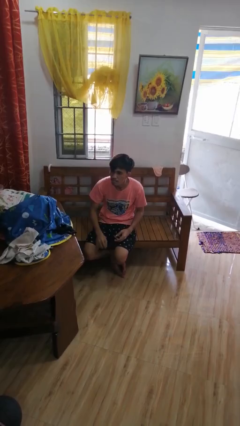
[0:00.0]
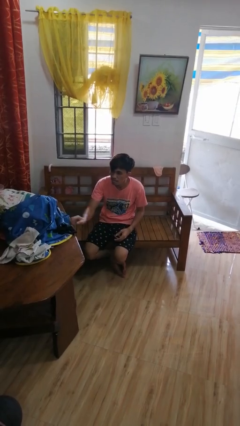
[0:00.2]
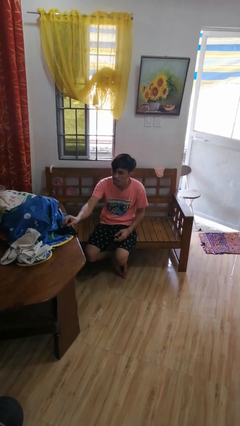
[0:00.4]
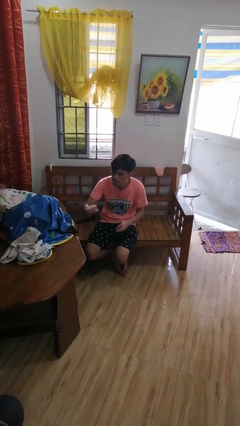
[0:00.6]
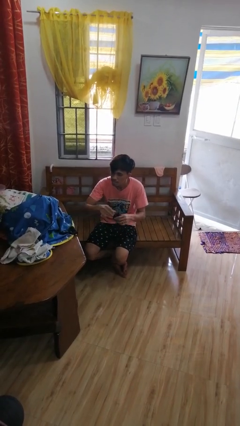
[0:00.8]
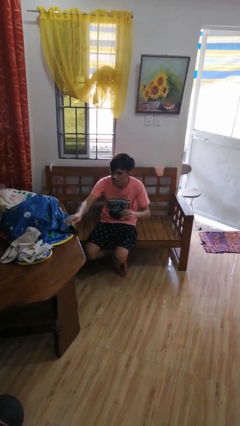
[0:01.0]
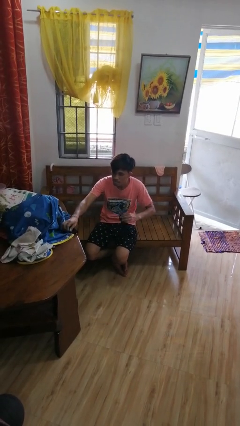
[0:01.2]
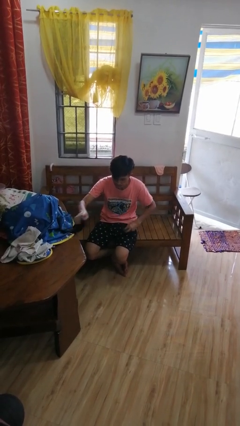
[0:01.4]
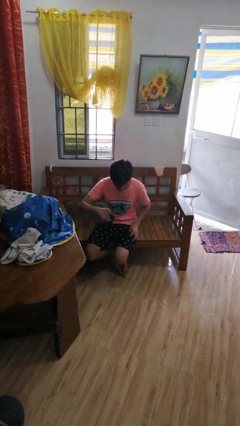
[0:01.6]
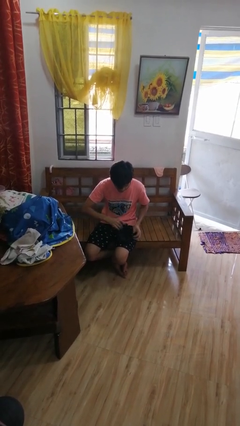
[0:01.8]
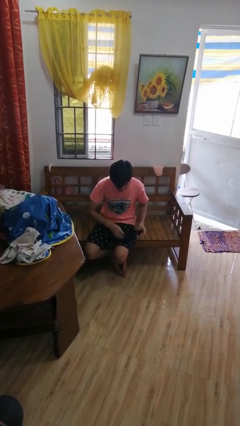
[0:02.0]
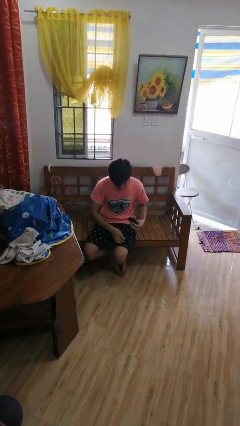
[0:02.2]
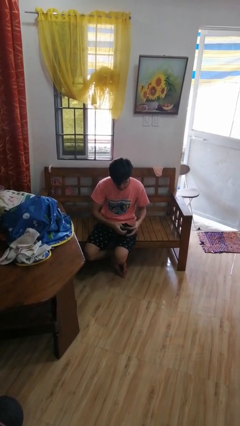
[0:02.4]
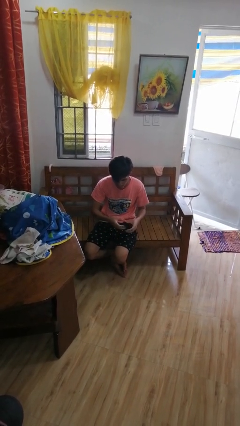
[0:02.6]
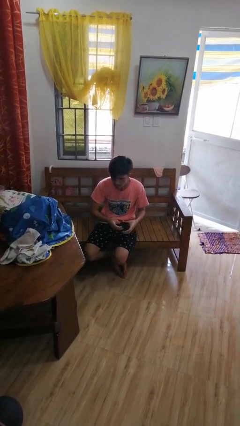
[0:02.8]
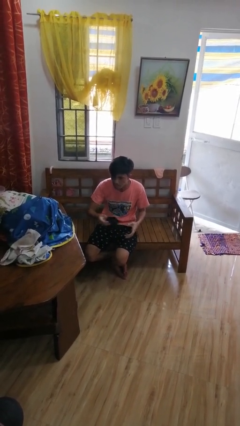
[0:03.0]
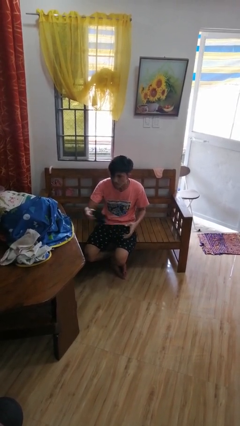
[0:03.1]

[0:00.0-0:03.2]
person folds socks

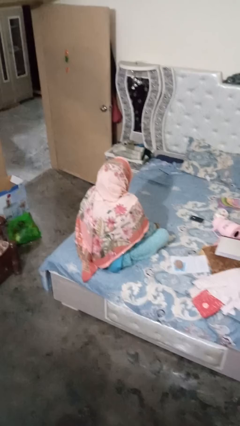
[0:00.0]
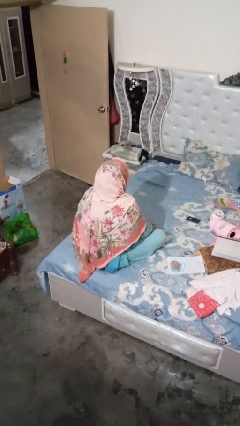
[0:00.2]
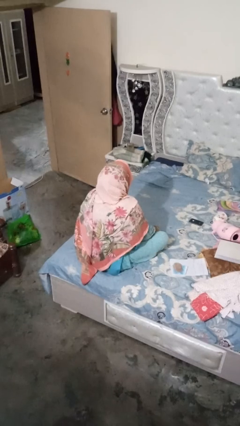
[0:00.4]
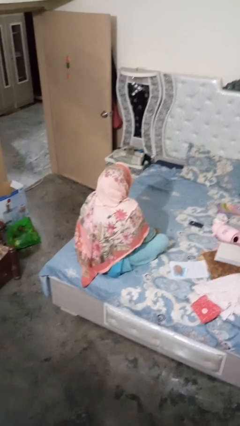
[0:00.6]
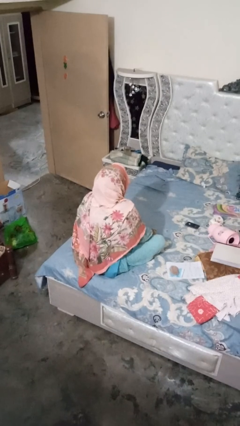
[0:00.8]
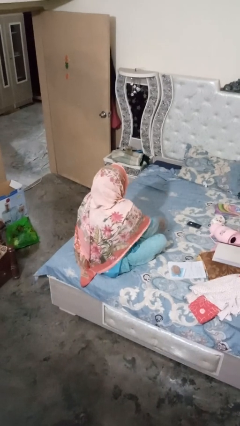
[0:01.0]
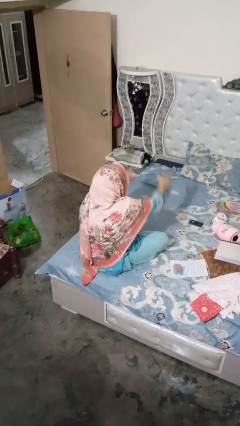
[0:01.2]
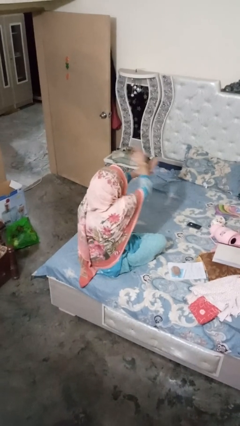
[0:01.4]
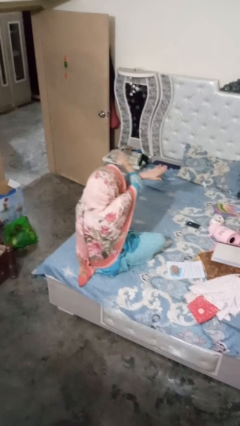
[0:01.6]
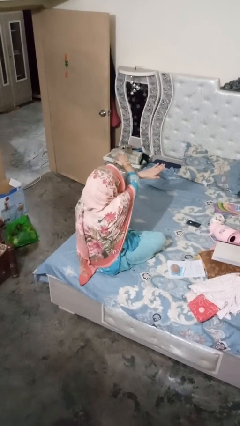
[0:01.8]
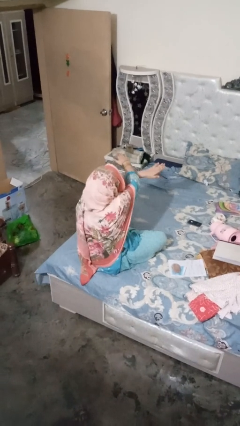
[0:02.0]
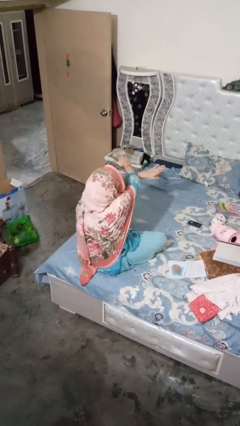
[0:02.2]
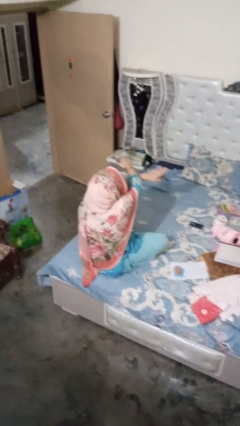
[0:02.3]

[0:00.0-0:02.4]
person gestures arms x

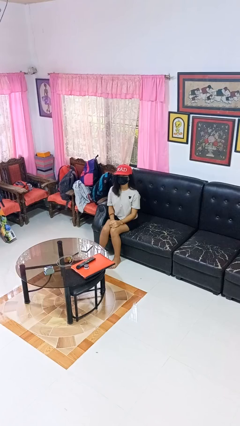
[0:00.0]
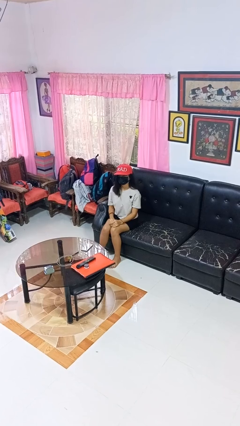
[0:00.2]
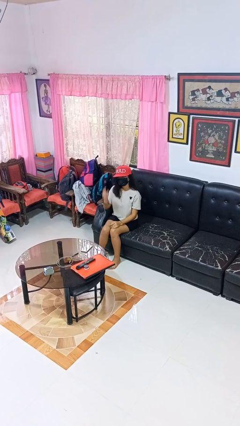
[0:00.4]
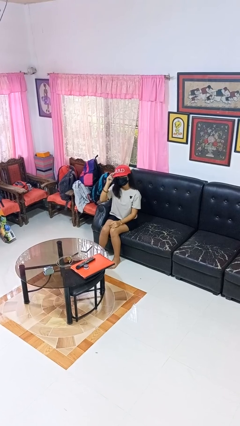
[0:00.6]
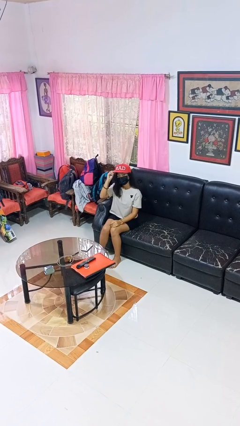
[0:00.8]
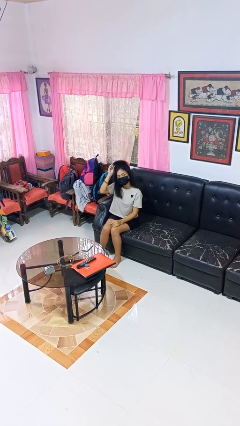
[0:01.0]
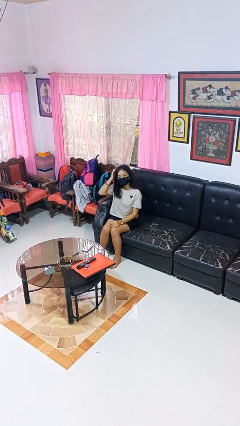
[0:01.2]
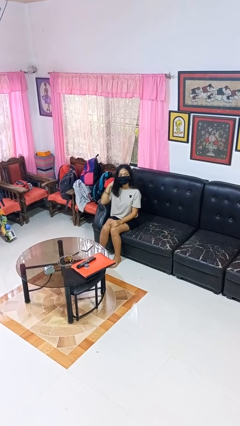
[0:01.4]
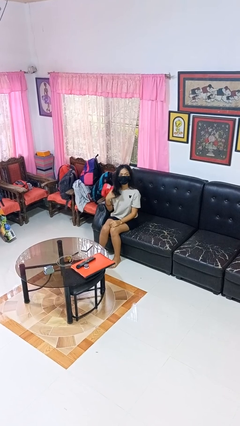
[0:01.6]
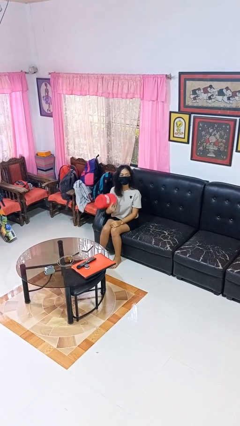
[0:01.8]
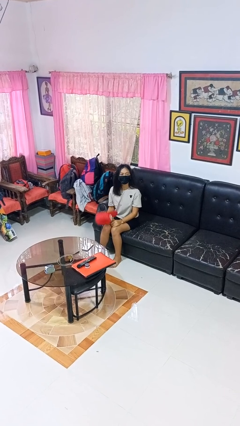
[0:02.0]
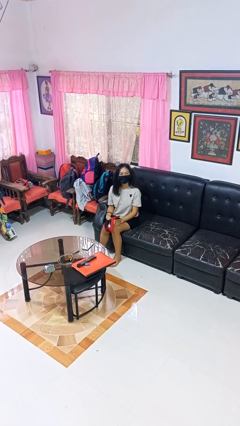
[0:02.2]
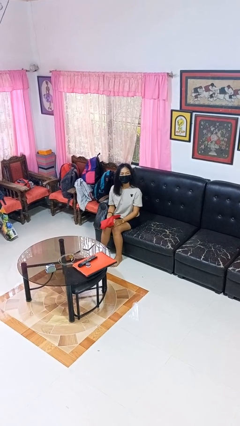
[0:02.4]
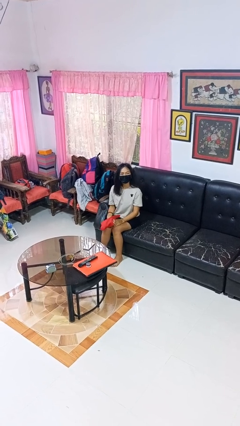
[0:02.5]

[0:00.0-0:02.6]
person takes off hat

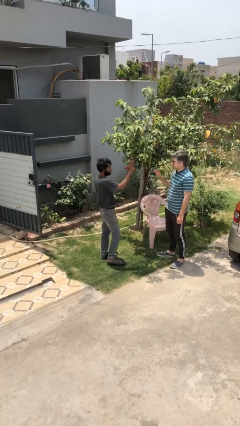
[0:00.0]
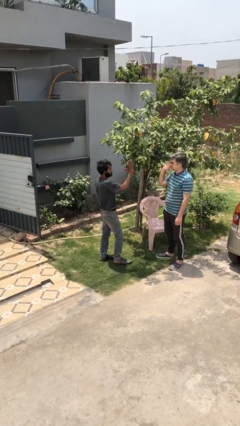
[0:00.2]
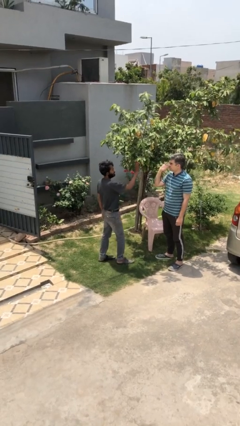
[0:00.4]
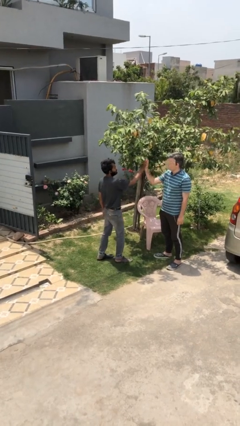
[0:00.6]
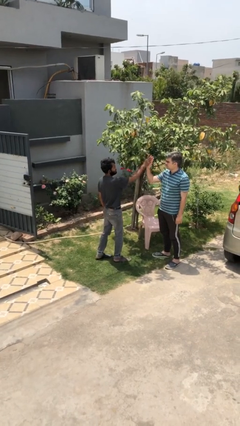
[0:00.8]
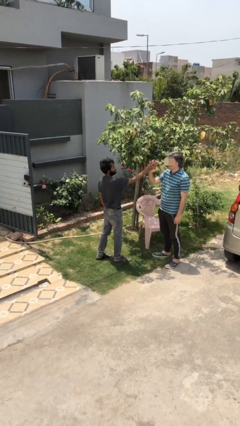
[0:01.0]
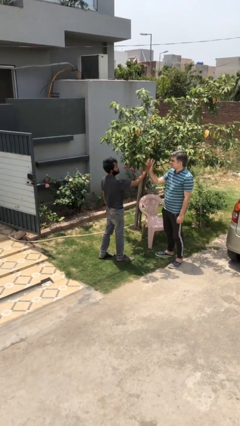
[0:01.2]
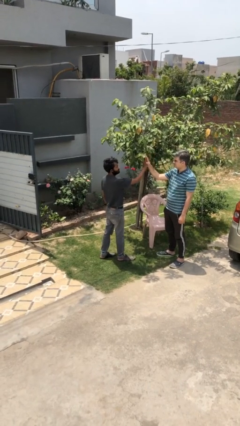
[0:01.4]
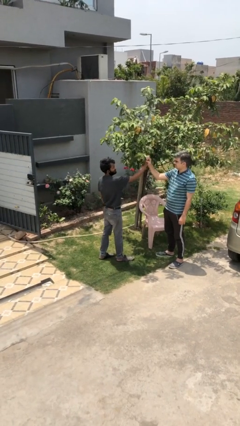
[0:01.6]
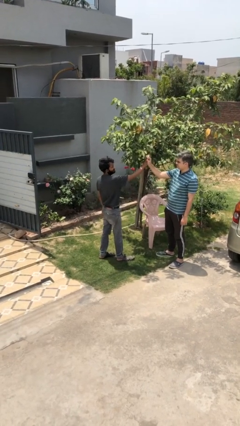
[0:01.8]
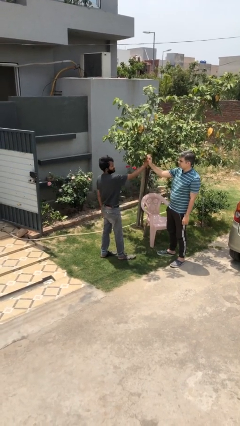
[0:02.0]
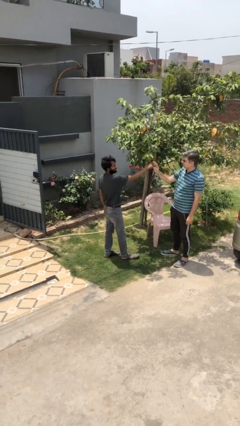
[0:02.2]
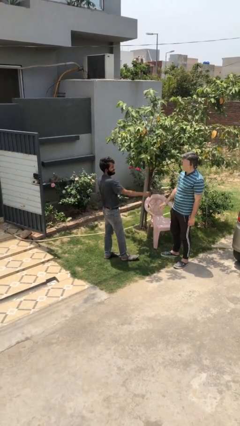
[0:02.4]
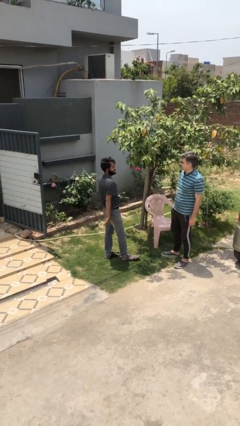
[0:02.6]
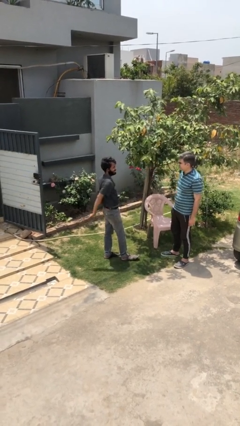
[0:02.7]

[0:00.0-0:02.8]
person highfives hand

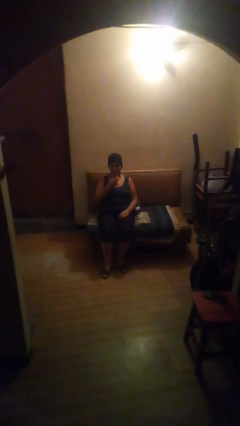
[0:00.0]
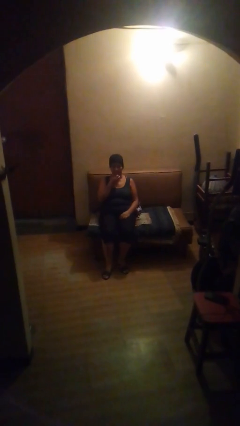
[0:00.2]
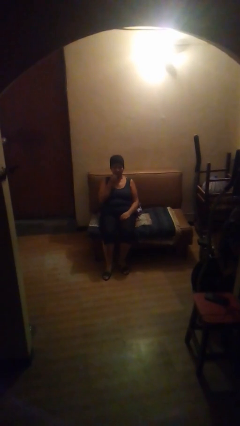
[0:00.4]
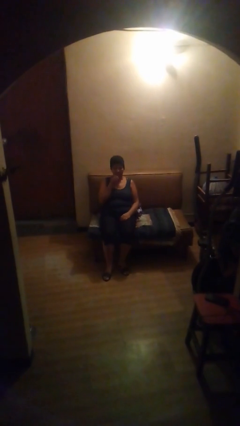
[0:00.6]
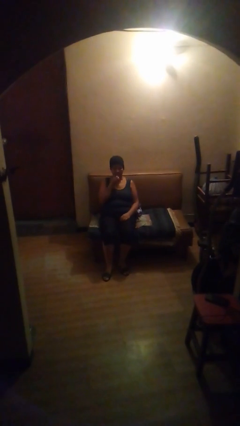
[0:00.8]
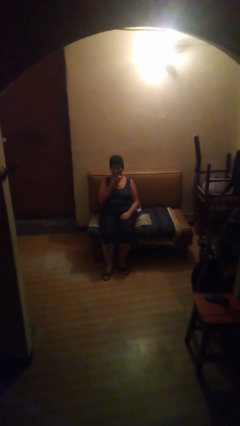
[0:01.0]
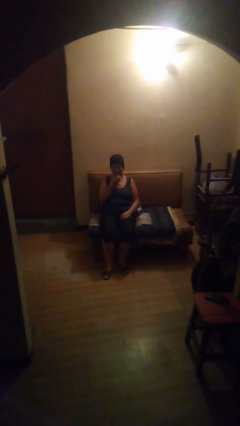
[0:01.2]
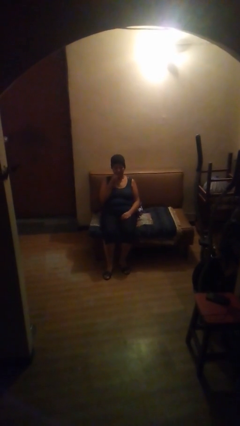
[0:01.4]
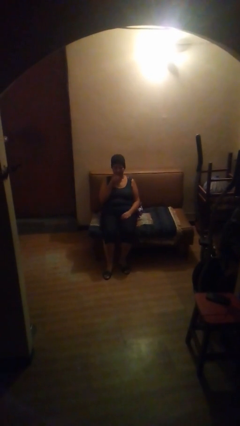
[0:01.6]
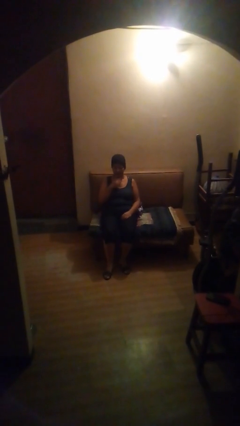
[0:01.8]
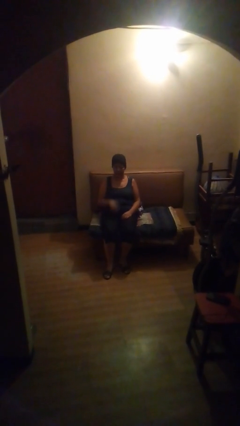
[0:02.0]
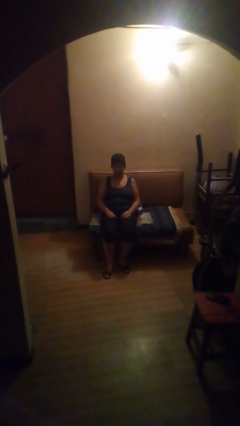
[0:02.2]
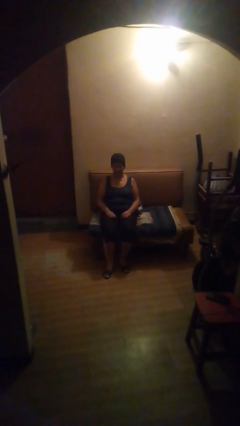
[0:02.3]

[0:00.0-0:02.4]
person scratches face

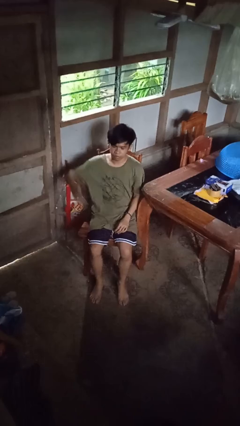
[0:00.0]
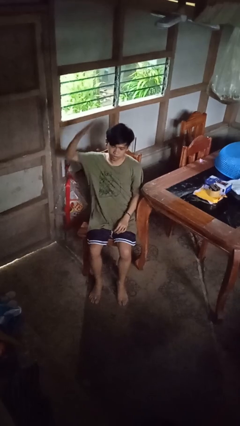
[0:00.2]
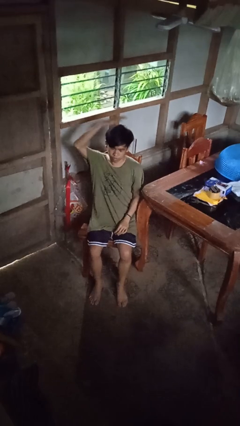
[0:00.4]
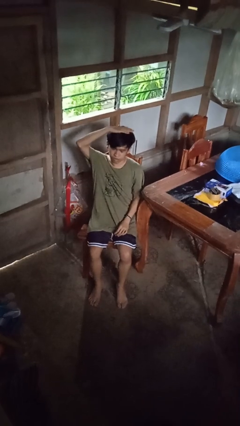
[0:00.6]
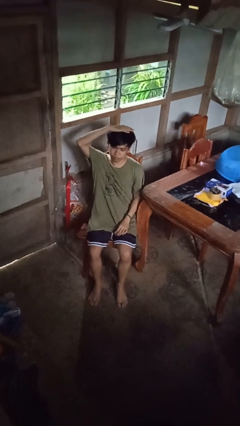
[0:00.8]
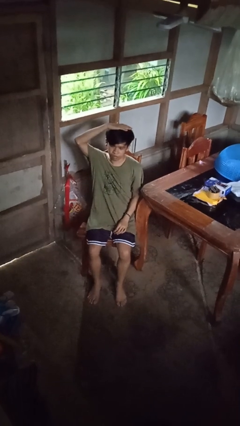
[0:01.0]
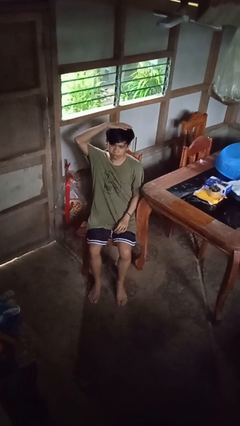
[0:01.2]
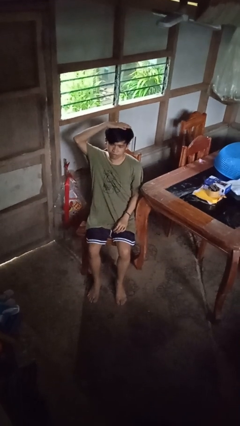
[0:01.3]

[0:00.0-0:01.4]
person pats head

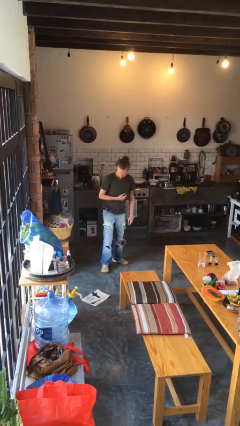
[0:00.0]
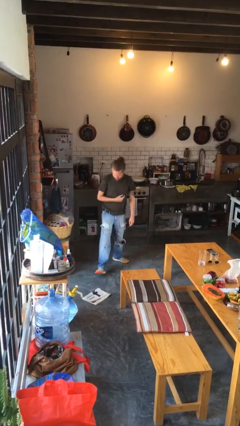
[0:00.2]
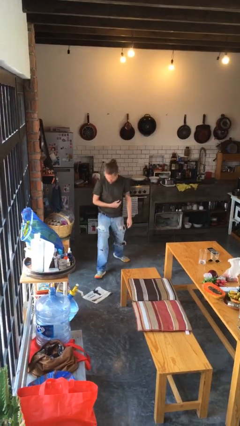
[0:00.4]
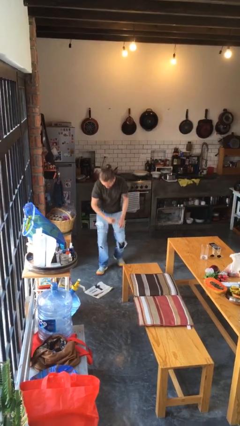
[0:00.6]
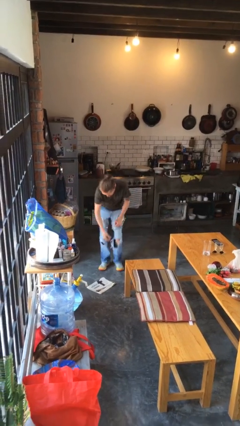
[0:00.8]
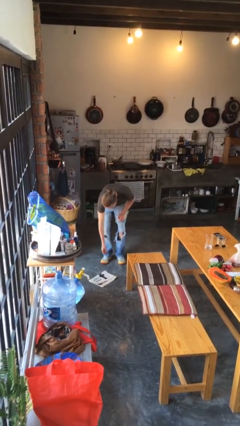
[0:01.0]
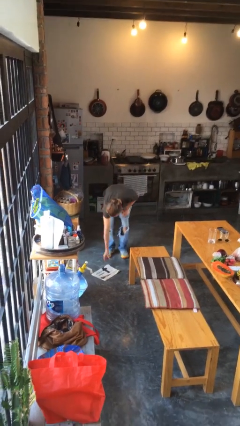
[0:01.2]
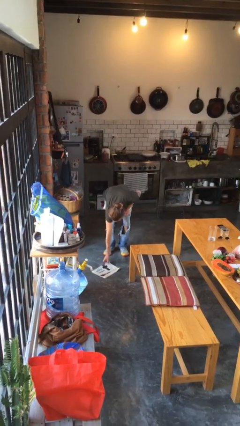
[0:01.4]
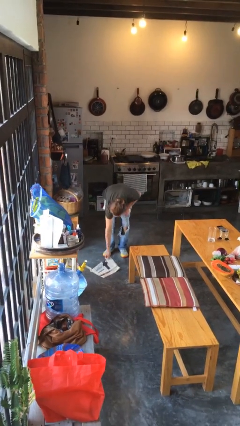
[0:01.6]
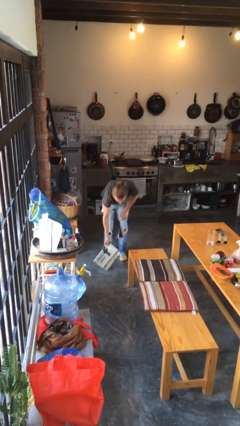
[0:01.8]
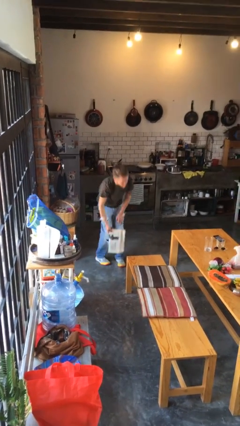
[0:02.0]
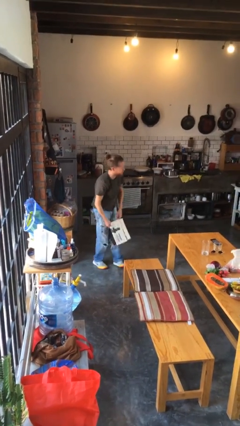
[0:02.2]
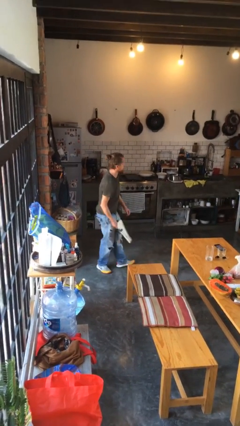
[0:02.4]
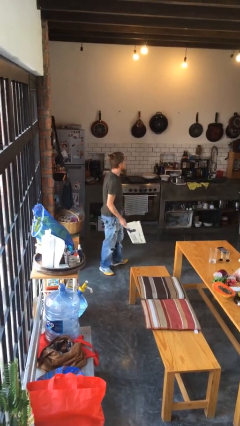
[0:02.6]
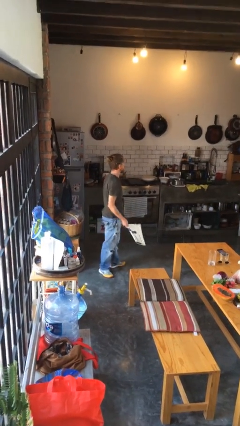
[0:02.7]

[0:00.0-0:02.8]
person picks up object from floor
